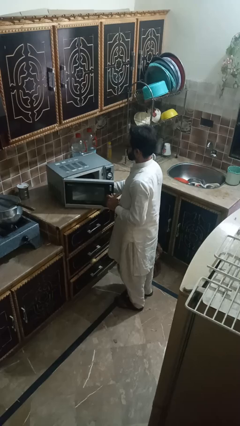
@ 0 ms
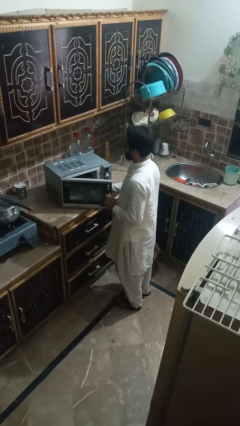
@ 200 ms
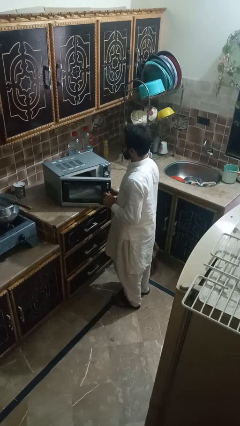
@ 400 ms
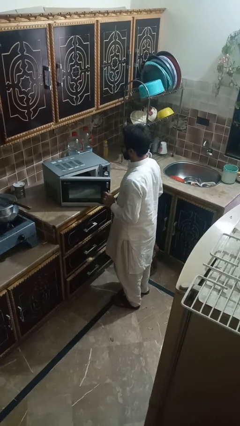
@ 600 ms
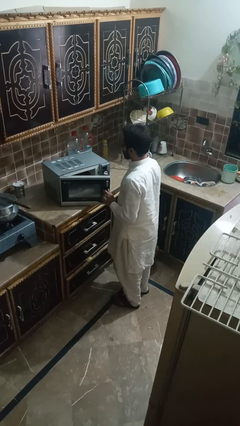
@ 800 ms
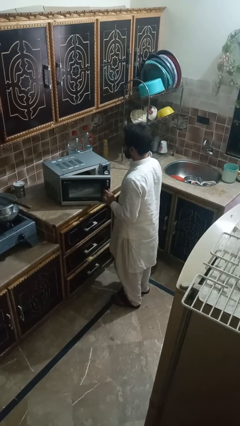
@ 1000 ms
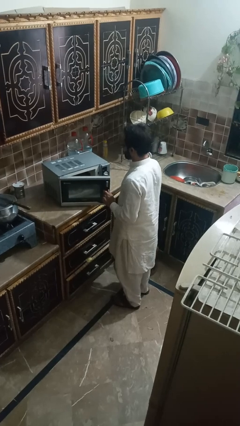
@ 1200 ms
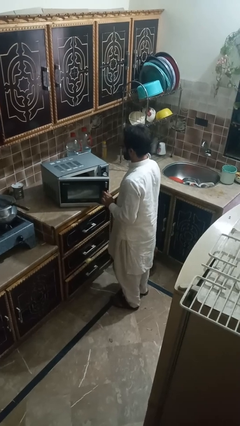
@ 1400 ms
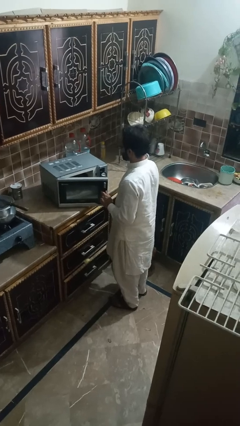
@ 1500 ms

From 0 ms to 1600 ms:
person takes object from microwave

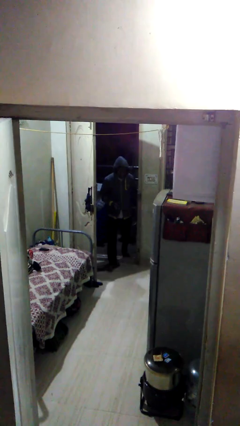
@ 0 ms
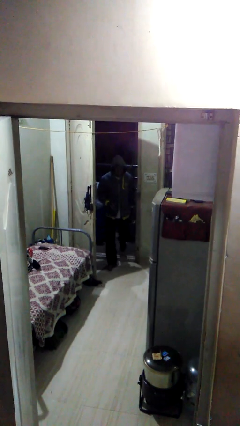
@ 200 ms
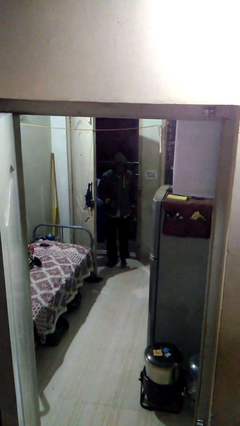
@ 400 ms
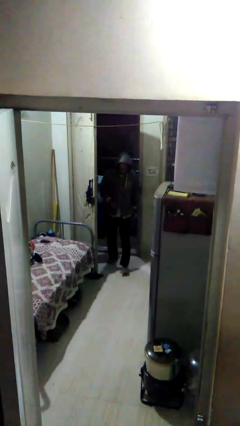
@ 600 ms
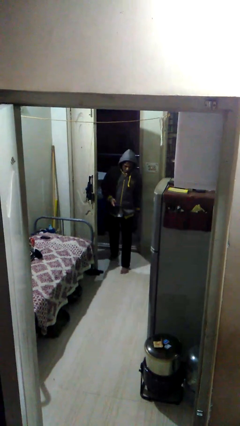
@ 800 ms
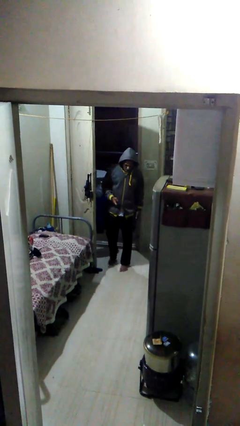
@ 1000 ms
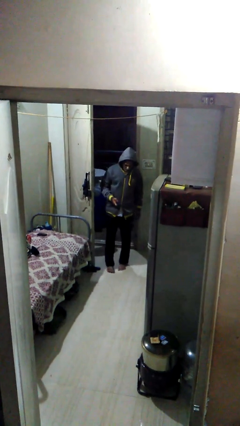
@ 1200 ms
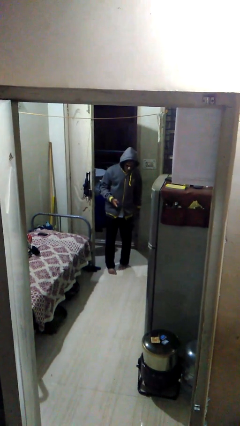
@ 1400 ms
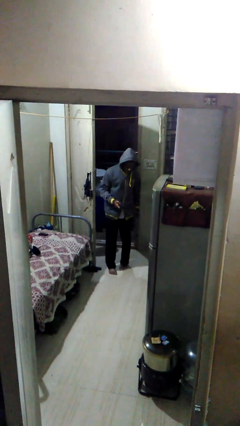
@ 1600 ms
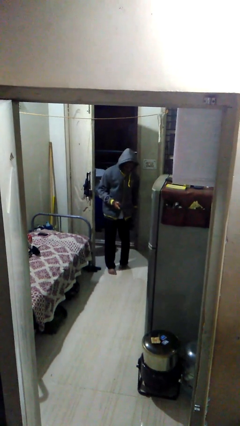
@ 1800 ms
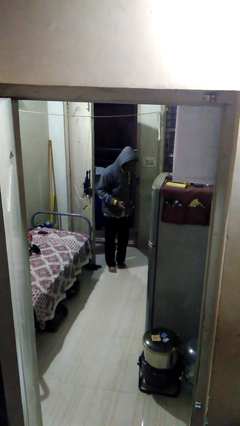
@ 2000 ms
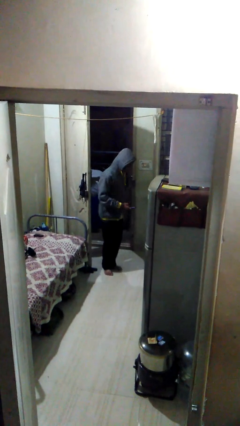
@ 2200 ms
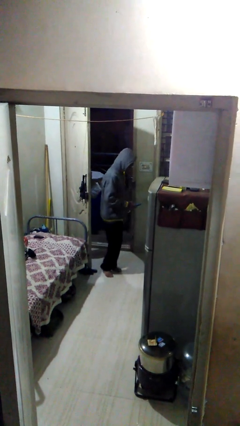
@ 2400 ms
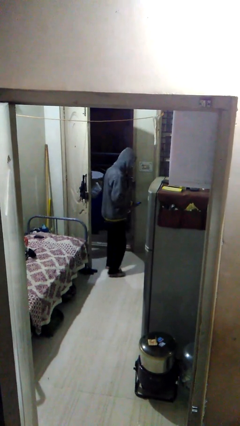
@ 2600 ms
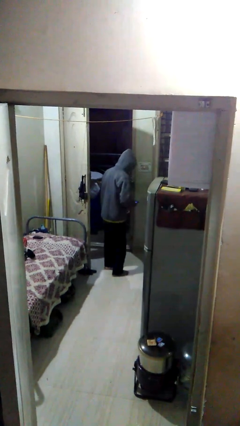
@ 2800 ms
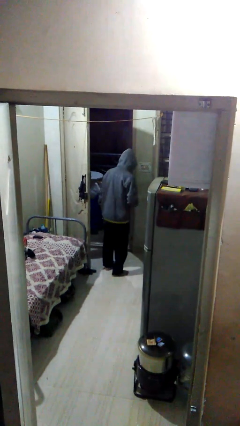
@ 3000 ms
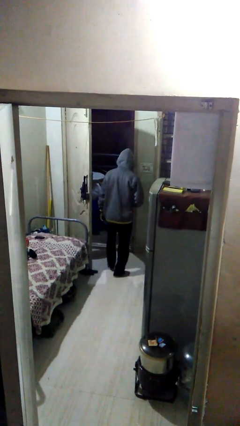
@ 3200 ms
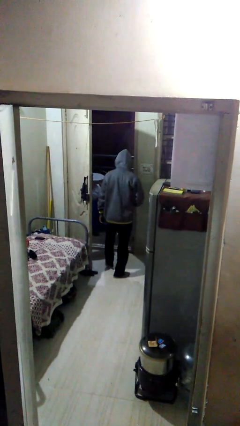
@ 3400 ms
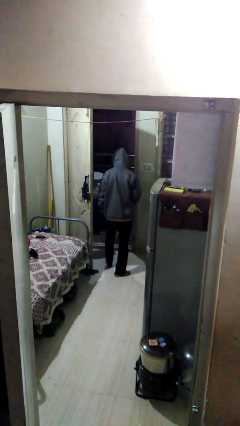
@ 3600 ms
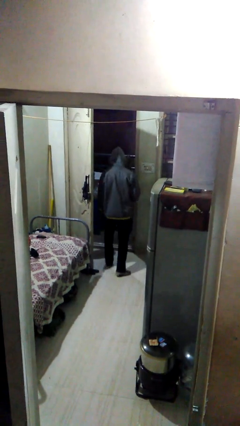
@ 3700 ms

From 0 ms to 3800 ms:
person enters scene through structure

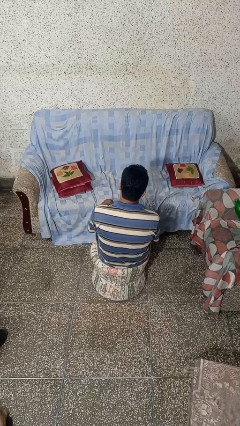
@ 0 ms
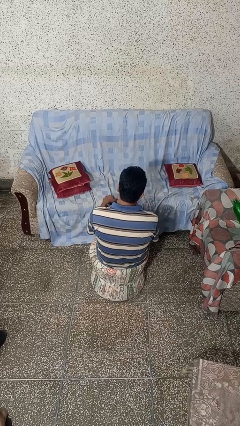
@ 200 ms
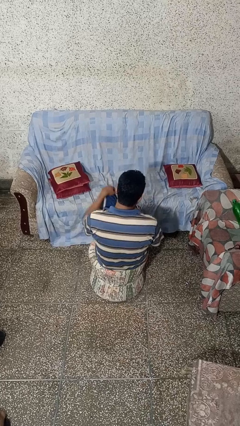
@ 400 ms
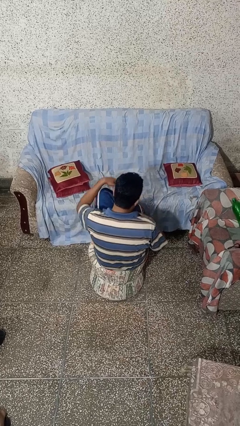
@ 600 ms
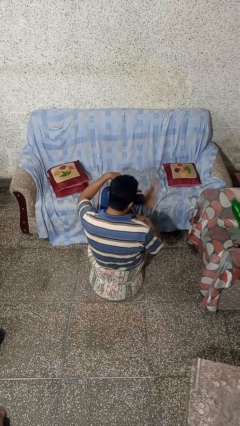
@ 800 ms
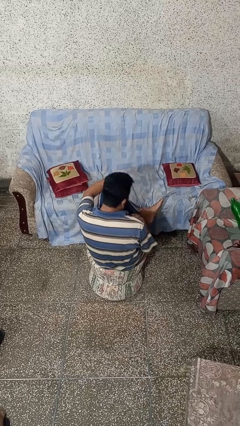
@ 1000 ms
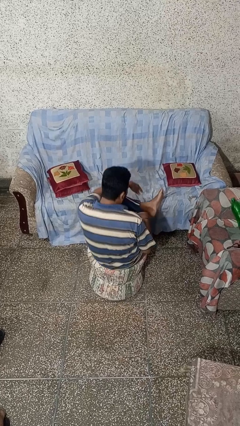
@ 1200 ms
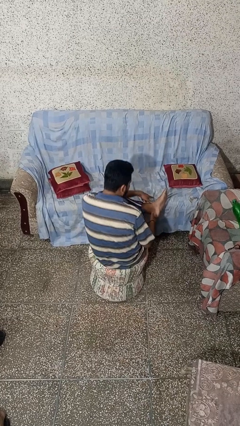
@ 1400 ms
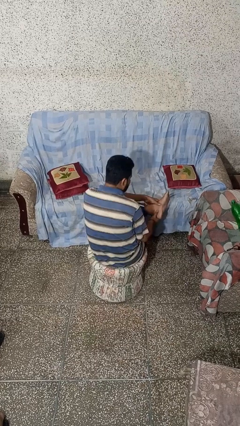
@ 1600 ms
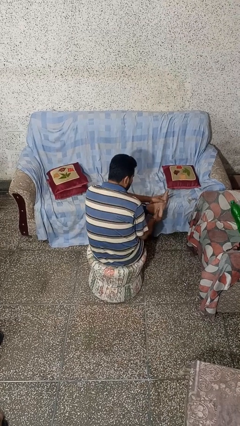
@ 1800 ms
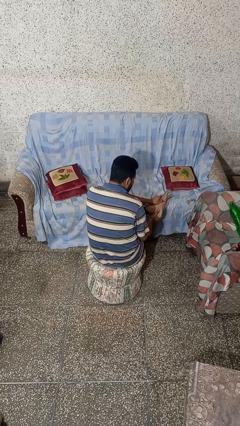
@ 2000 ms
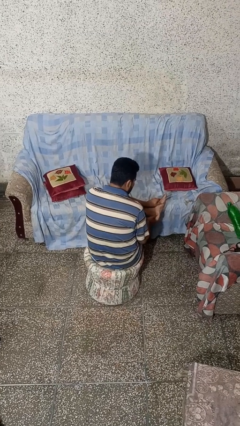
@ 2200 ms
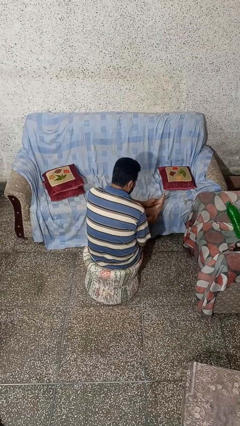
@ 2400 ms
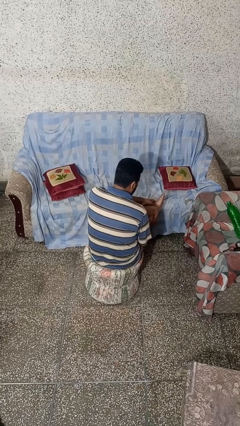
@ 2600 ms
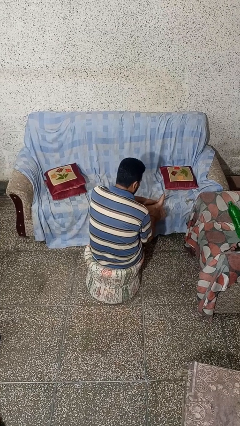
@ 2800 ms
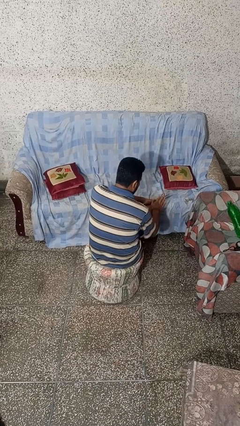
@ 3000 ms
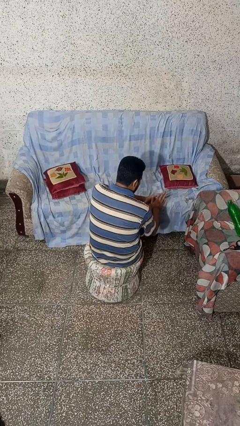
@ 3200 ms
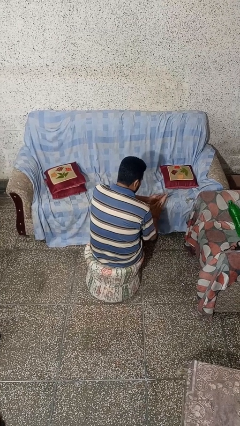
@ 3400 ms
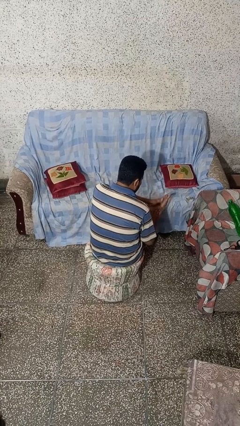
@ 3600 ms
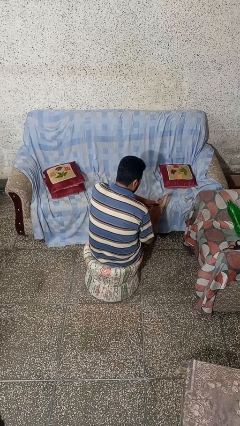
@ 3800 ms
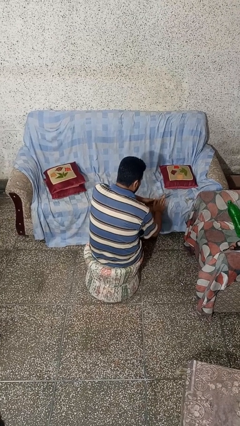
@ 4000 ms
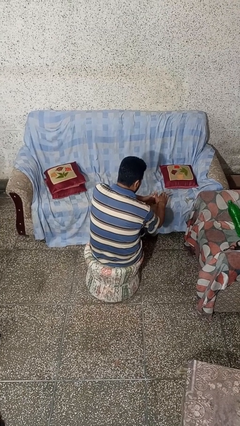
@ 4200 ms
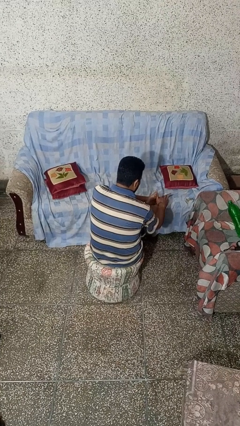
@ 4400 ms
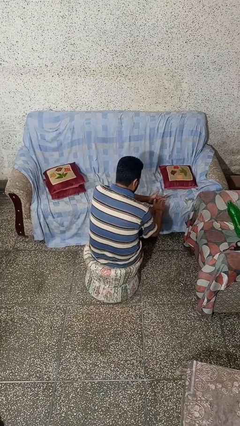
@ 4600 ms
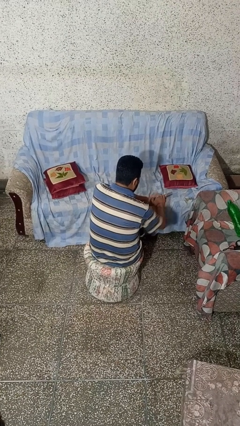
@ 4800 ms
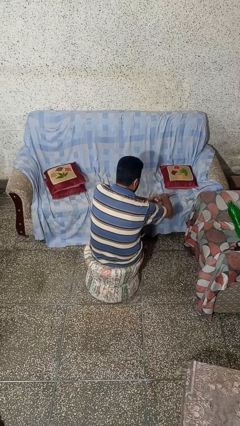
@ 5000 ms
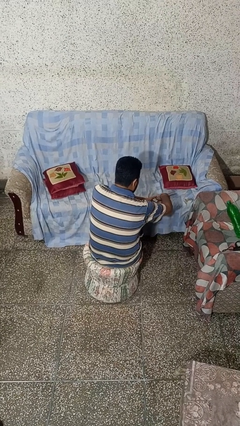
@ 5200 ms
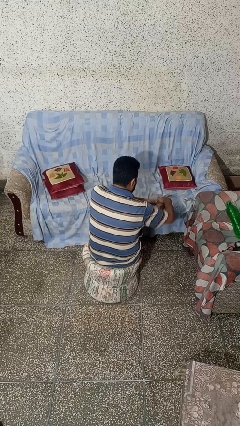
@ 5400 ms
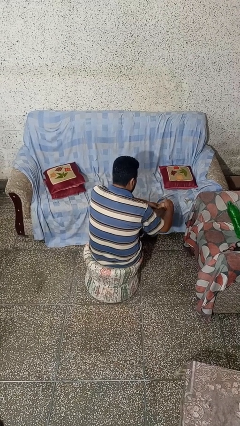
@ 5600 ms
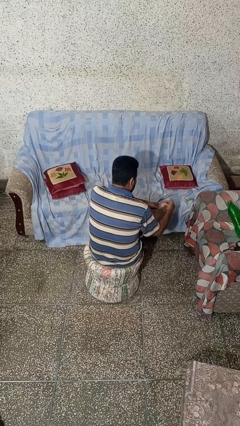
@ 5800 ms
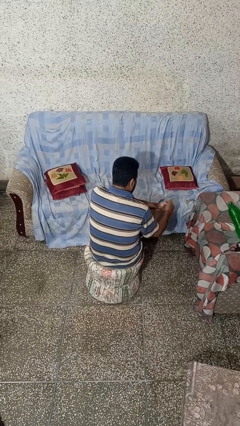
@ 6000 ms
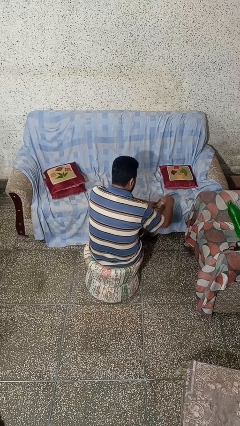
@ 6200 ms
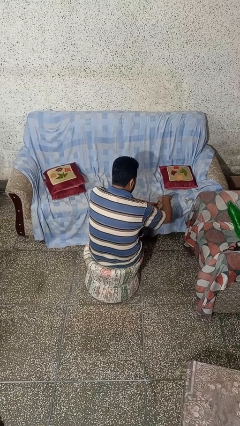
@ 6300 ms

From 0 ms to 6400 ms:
person rubs foot

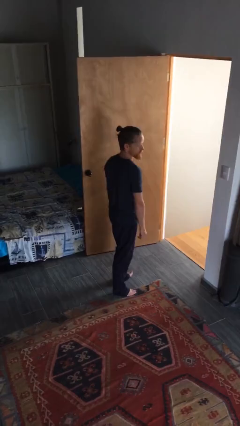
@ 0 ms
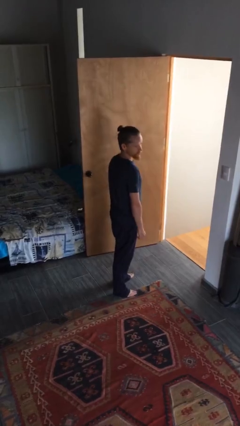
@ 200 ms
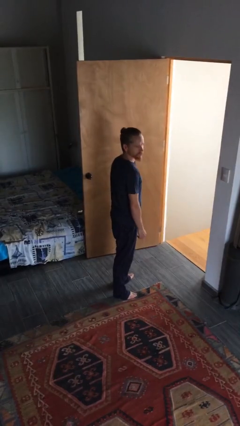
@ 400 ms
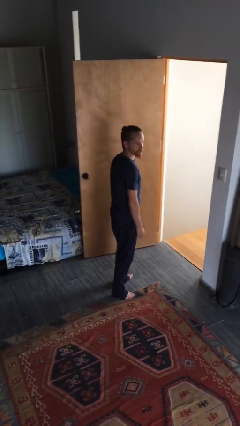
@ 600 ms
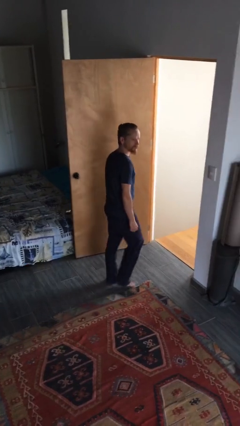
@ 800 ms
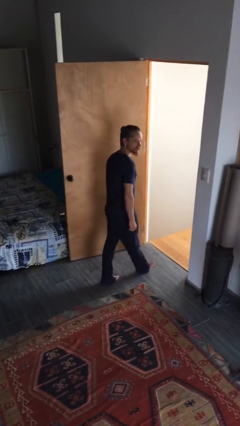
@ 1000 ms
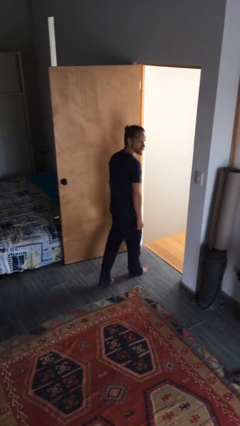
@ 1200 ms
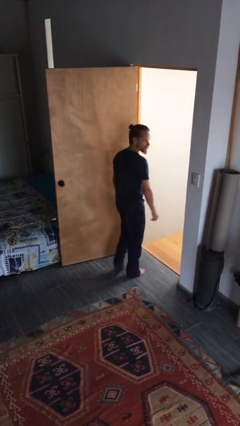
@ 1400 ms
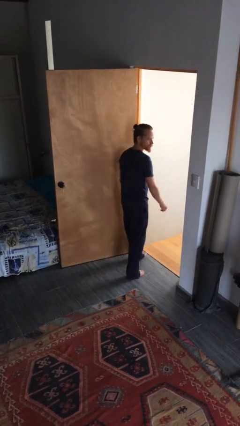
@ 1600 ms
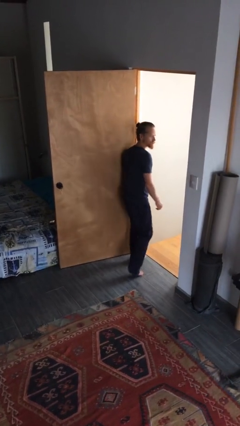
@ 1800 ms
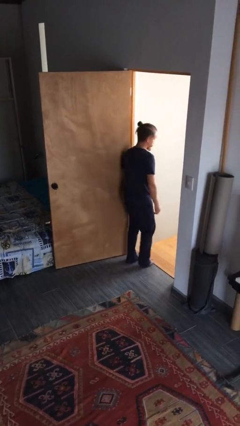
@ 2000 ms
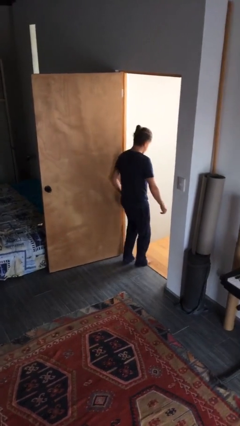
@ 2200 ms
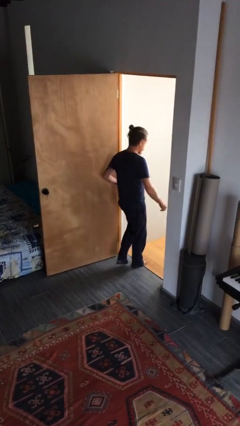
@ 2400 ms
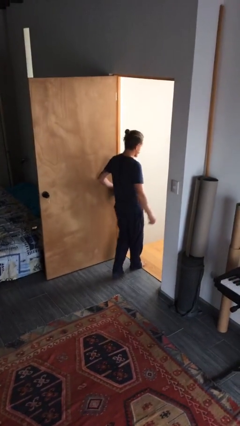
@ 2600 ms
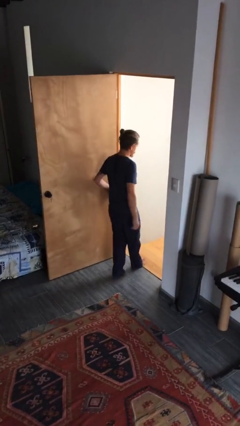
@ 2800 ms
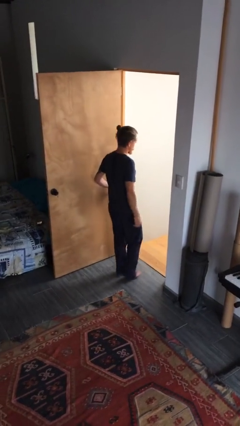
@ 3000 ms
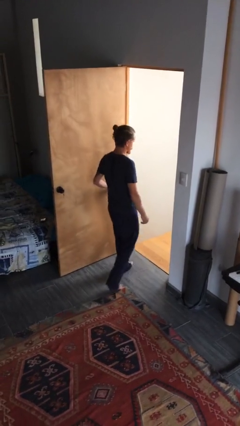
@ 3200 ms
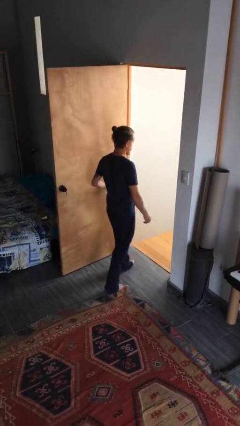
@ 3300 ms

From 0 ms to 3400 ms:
person bumps into wall

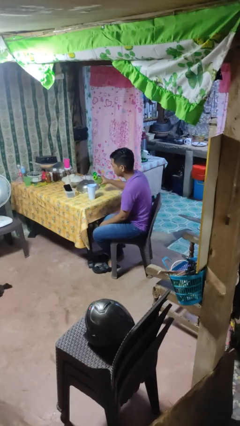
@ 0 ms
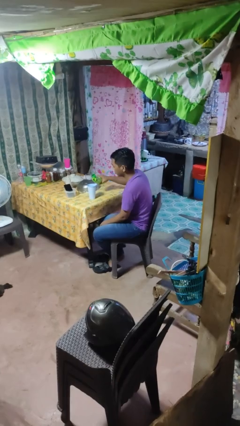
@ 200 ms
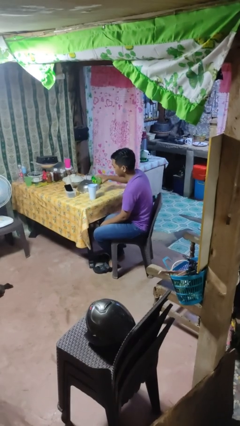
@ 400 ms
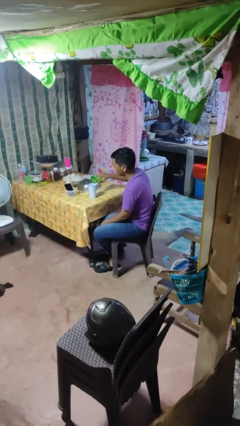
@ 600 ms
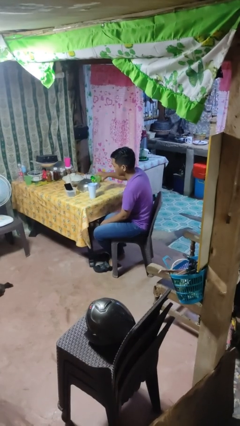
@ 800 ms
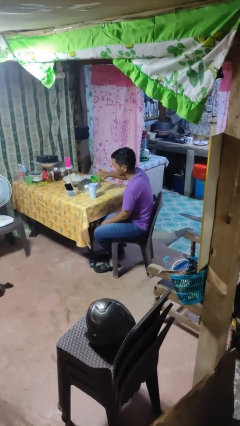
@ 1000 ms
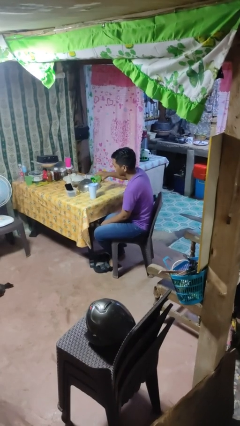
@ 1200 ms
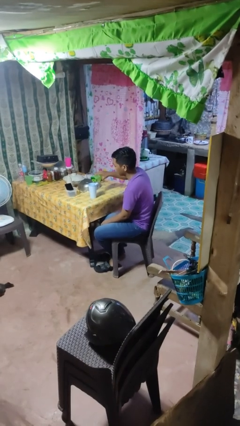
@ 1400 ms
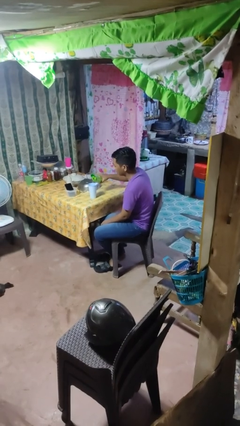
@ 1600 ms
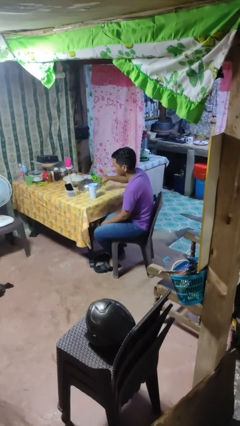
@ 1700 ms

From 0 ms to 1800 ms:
person pours liquid into cup

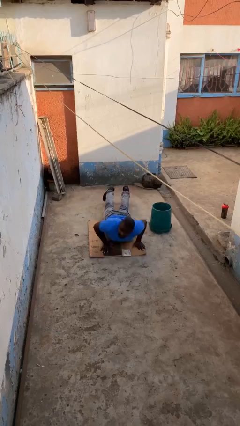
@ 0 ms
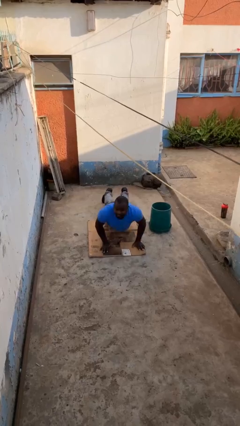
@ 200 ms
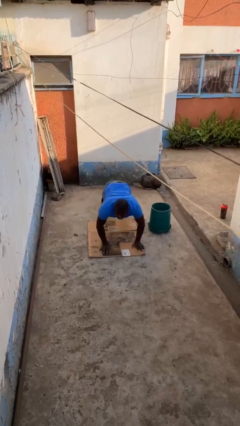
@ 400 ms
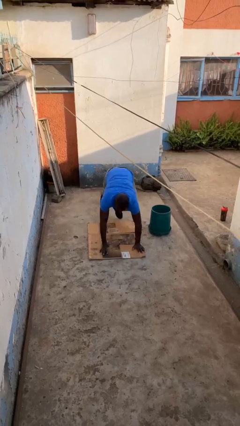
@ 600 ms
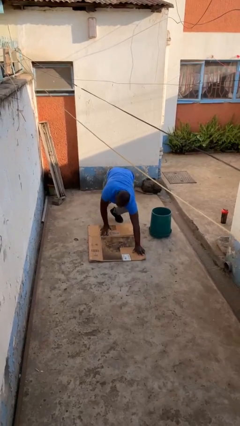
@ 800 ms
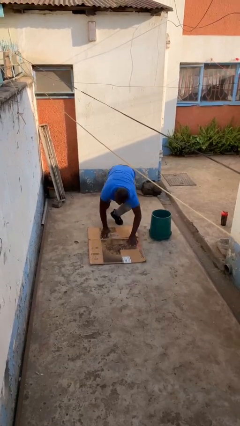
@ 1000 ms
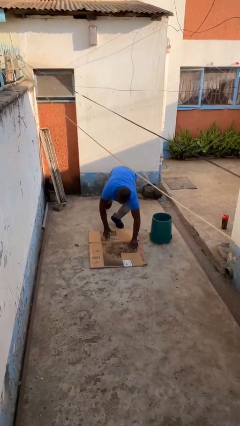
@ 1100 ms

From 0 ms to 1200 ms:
person stands up from floor
